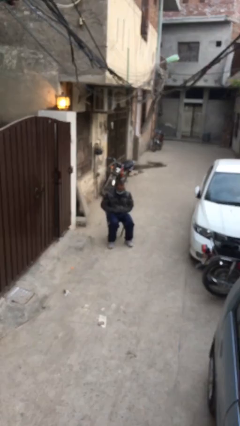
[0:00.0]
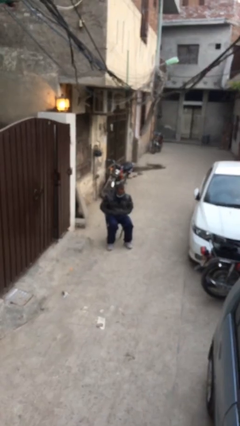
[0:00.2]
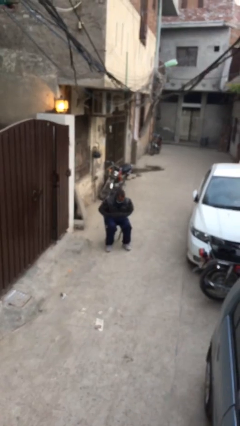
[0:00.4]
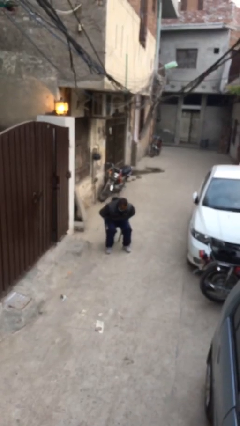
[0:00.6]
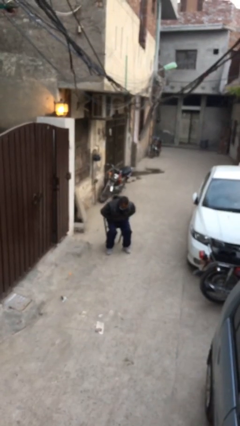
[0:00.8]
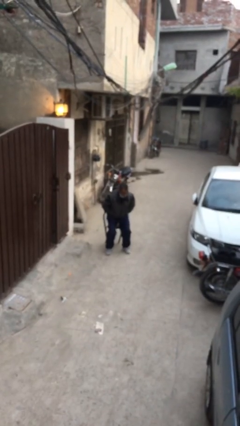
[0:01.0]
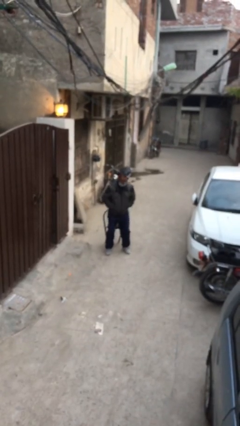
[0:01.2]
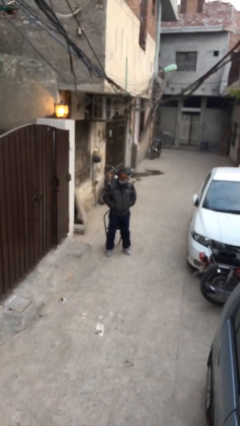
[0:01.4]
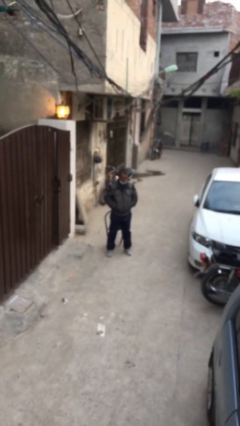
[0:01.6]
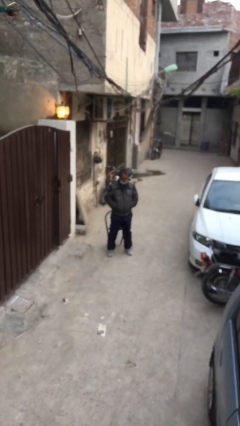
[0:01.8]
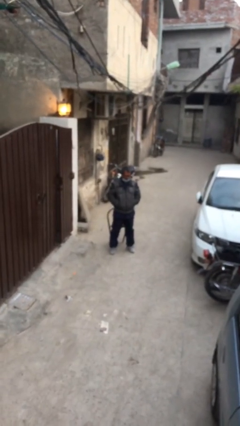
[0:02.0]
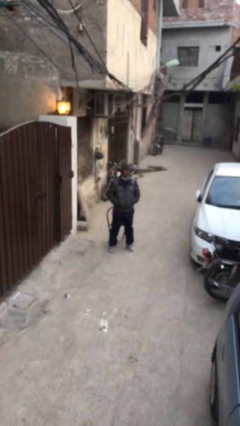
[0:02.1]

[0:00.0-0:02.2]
person stands up

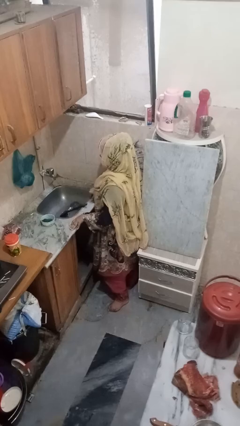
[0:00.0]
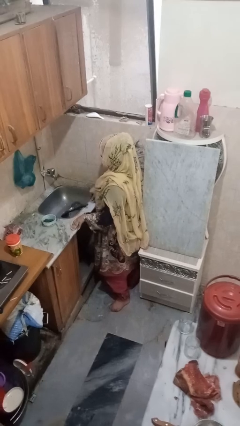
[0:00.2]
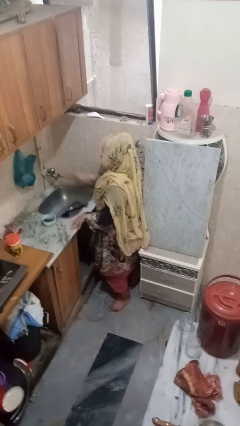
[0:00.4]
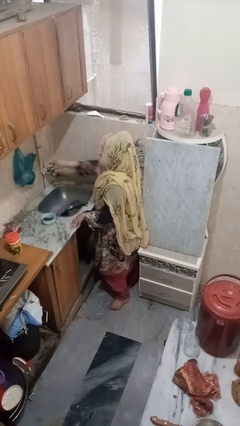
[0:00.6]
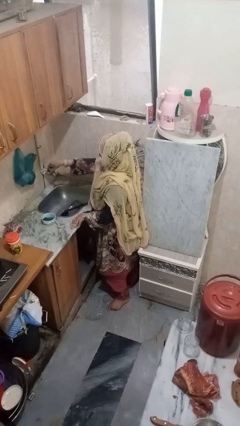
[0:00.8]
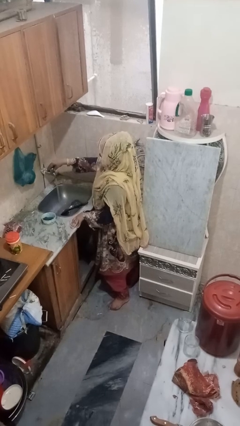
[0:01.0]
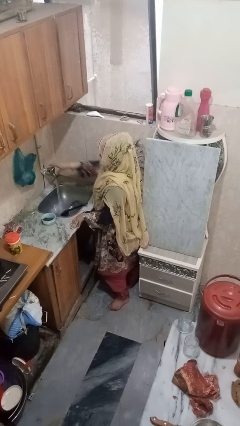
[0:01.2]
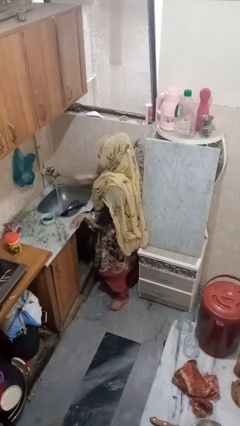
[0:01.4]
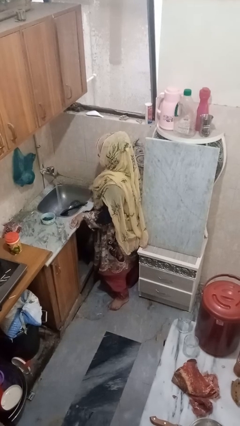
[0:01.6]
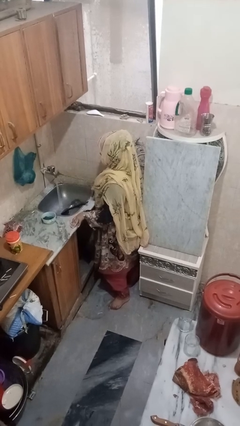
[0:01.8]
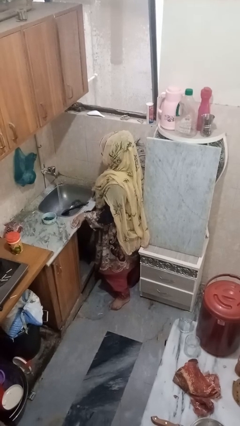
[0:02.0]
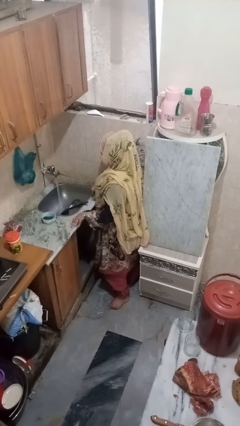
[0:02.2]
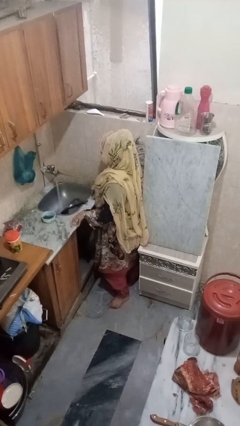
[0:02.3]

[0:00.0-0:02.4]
person turns on faucet

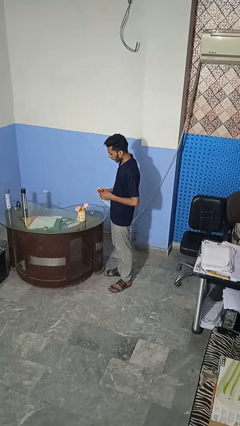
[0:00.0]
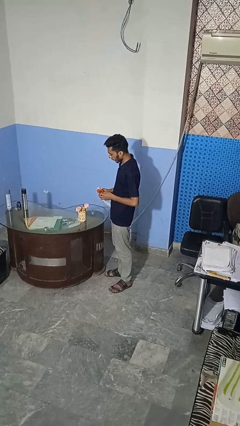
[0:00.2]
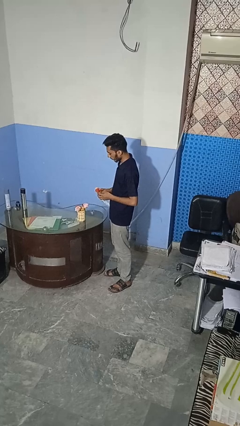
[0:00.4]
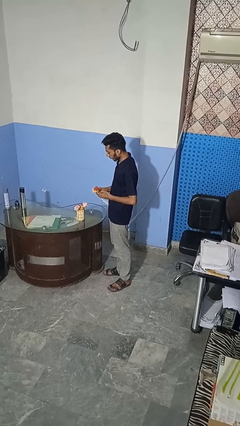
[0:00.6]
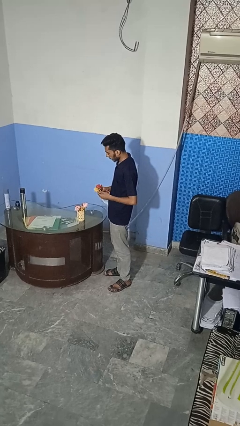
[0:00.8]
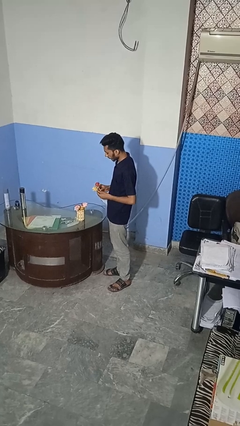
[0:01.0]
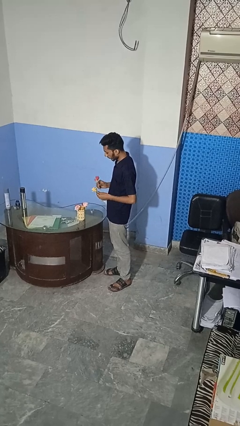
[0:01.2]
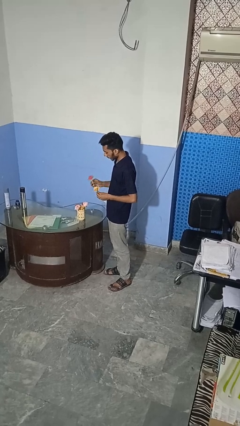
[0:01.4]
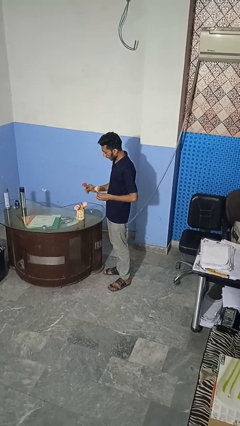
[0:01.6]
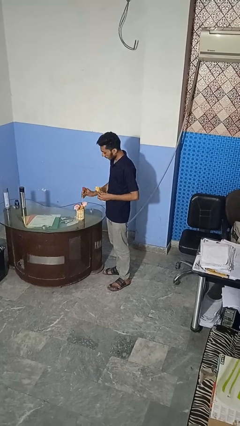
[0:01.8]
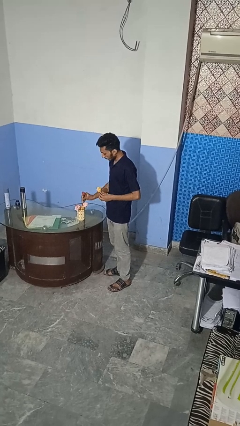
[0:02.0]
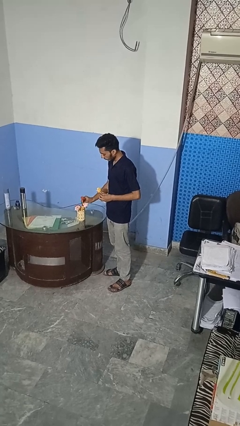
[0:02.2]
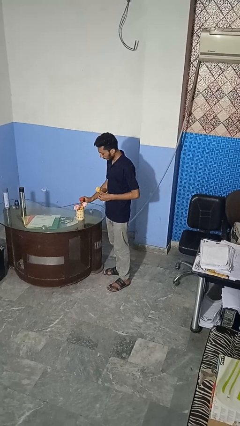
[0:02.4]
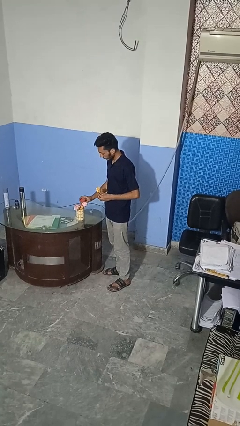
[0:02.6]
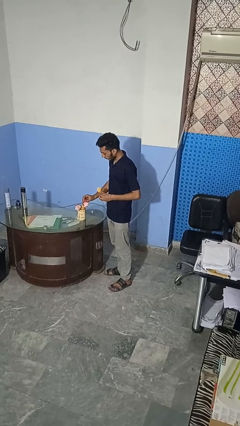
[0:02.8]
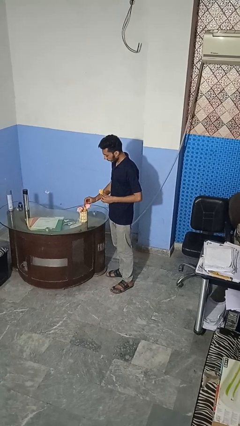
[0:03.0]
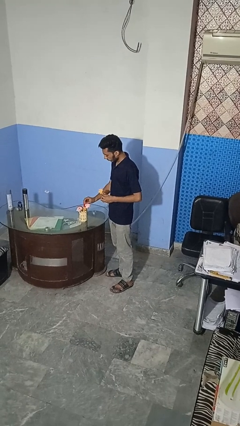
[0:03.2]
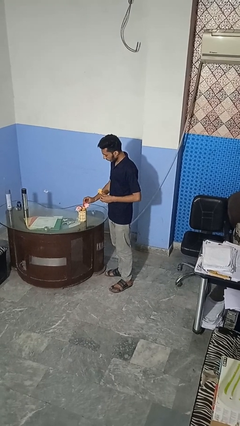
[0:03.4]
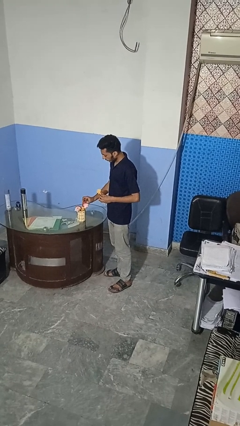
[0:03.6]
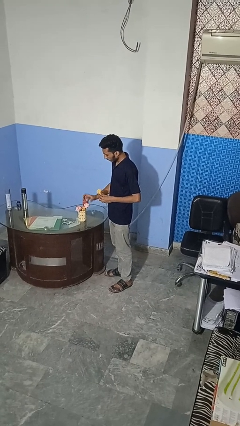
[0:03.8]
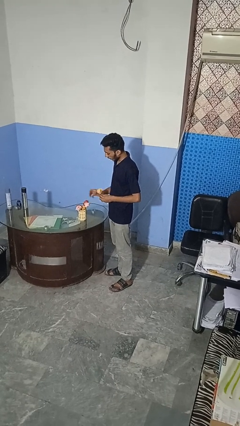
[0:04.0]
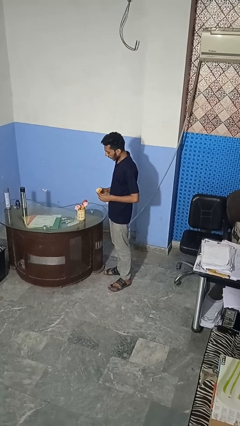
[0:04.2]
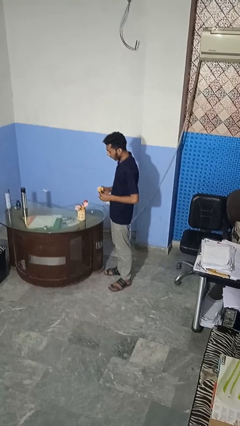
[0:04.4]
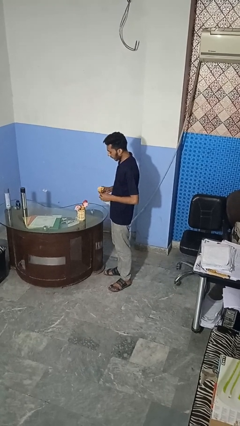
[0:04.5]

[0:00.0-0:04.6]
person arranges flowers in vase

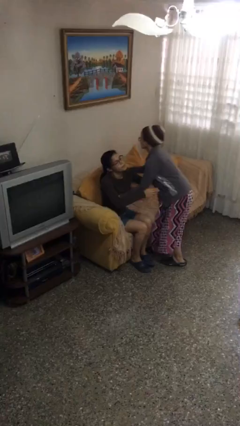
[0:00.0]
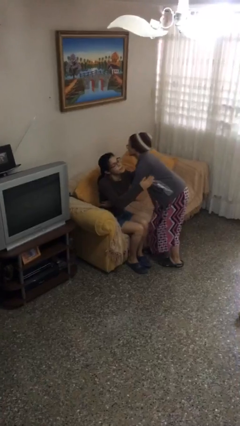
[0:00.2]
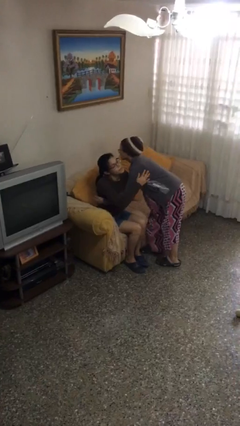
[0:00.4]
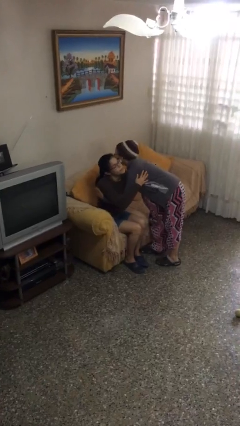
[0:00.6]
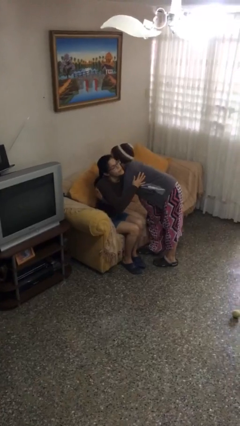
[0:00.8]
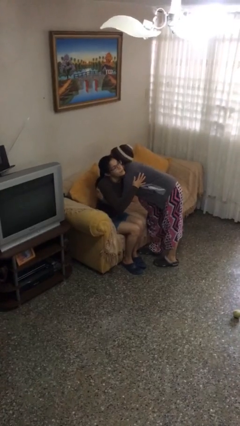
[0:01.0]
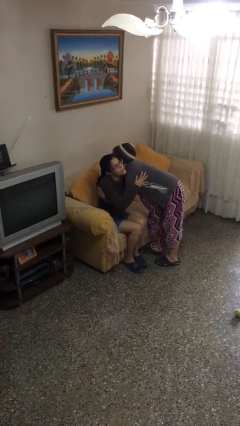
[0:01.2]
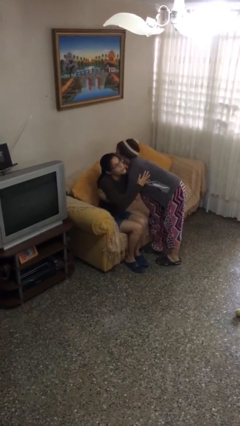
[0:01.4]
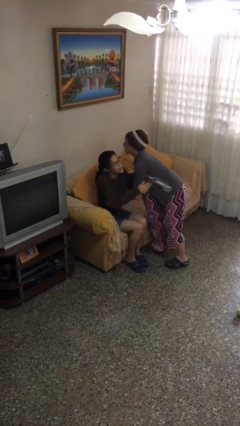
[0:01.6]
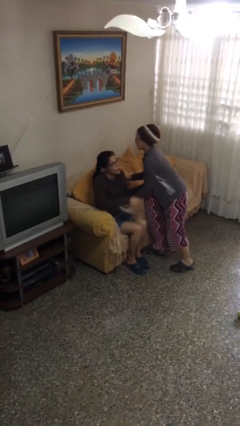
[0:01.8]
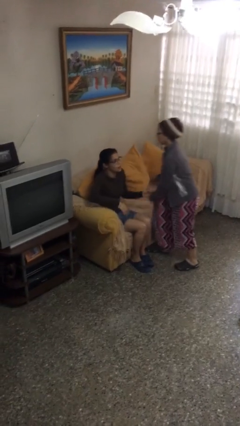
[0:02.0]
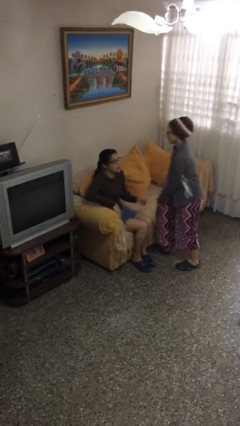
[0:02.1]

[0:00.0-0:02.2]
person embraces person

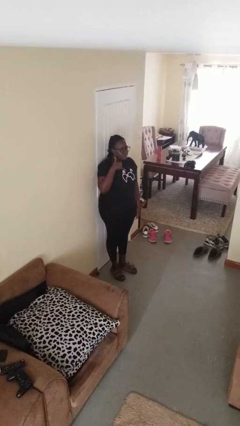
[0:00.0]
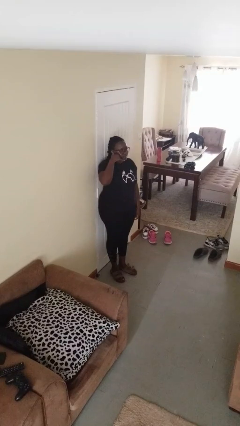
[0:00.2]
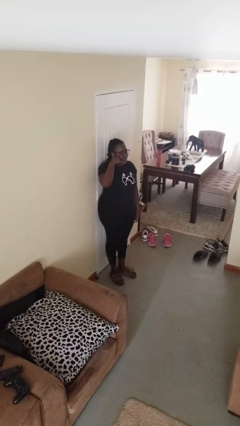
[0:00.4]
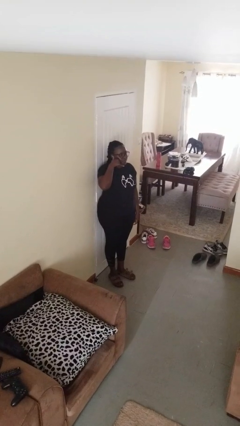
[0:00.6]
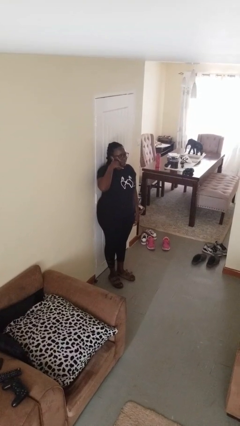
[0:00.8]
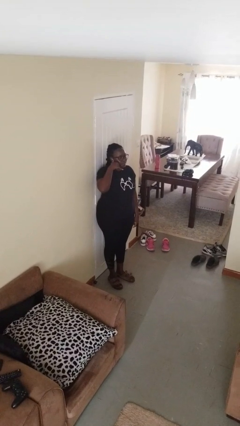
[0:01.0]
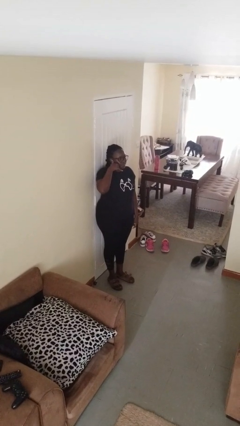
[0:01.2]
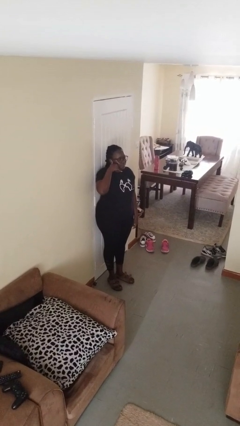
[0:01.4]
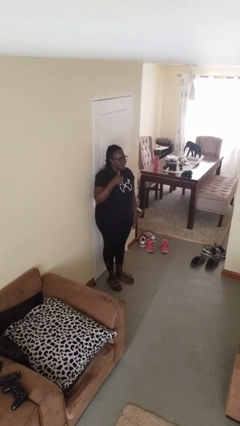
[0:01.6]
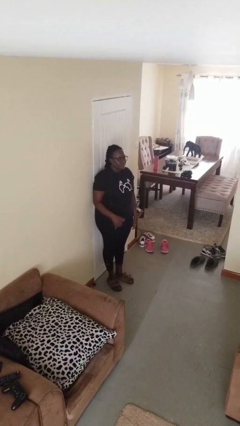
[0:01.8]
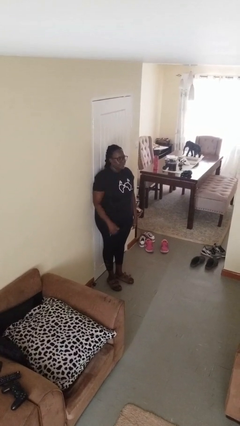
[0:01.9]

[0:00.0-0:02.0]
person gestures call me

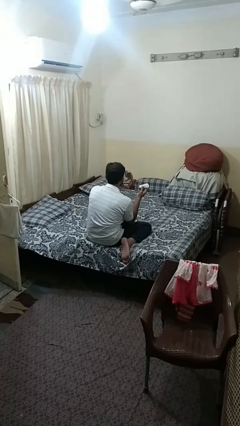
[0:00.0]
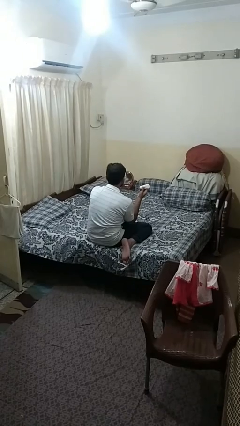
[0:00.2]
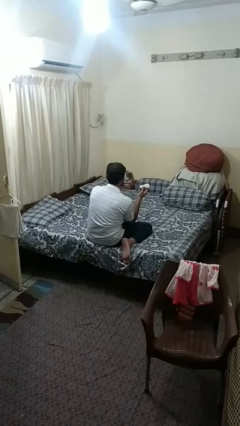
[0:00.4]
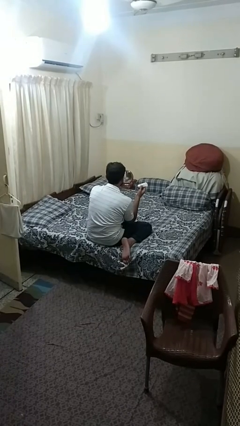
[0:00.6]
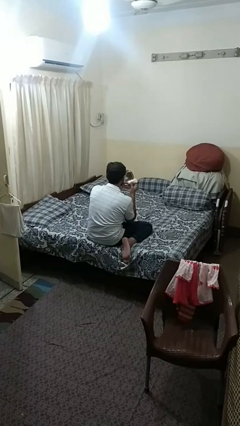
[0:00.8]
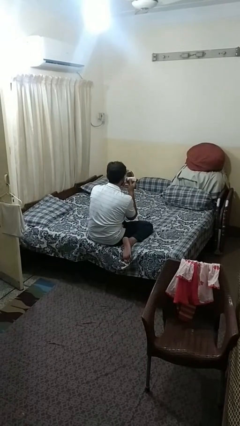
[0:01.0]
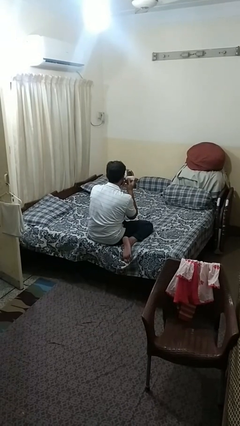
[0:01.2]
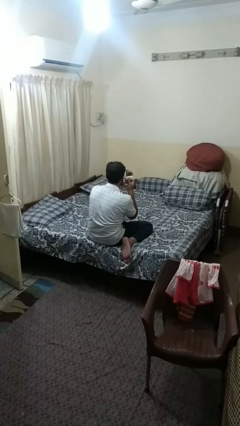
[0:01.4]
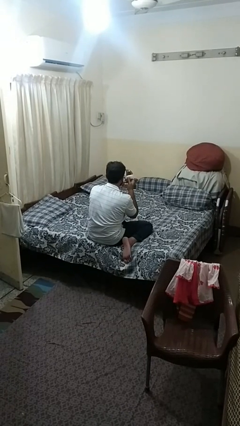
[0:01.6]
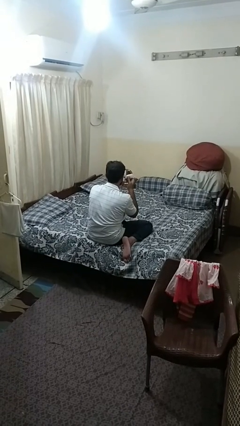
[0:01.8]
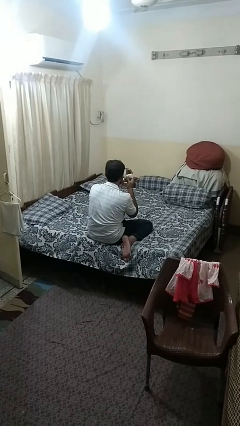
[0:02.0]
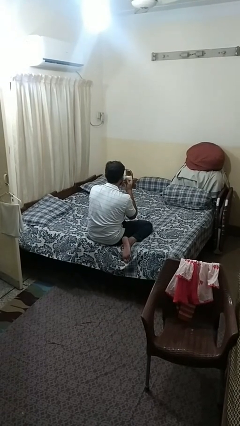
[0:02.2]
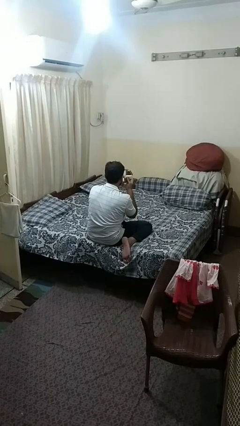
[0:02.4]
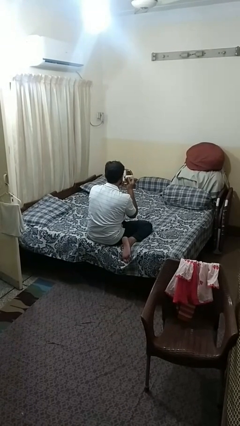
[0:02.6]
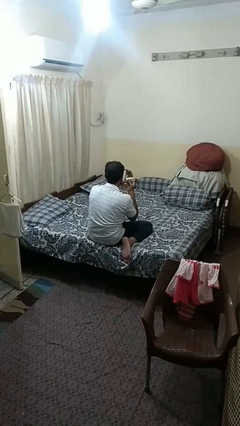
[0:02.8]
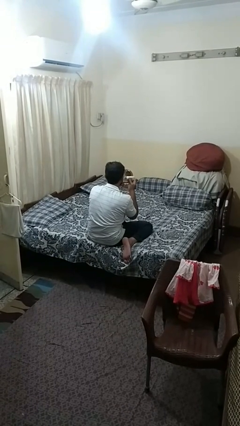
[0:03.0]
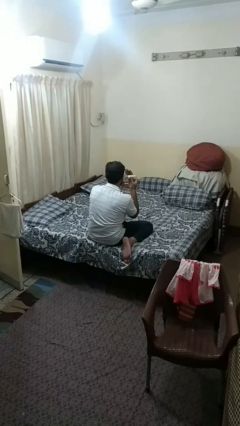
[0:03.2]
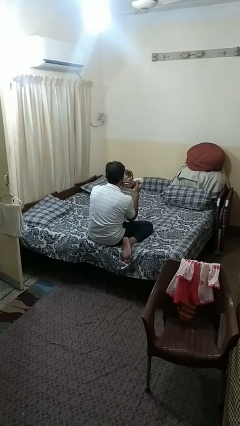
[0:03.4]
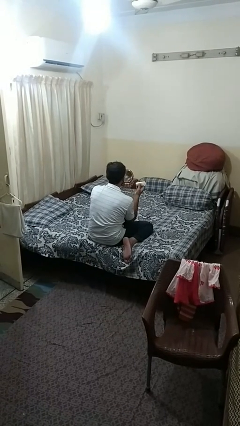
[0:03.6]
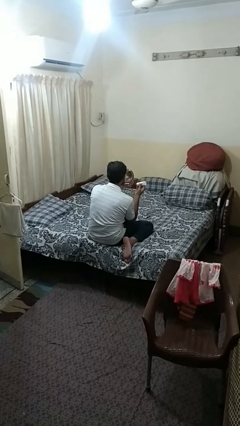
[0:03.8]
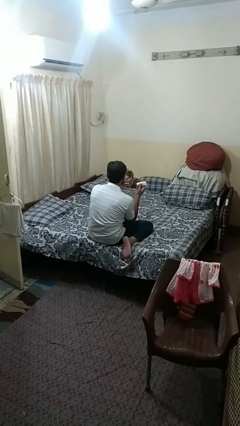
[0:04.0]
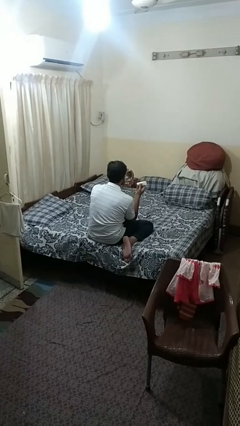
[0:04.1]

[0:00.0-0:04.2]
person applies foundation makeup
